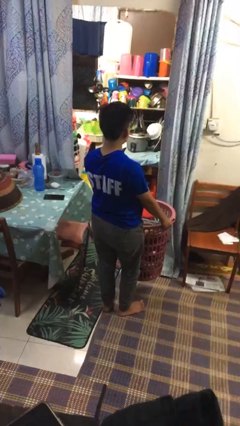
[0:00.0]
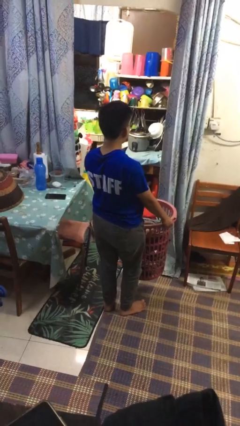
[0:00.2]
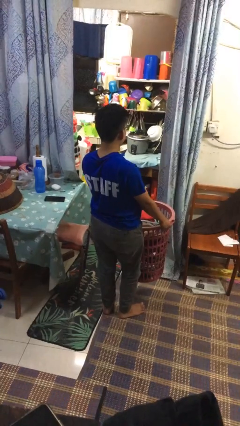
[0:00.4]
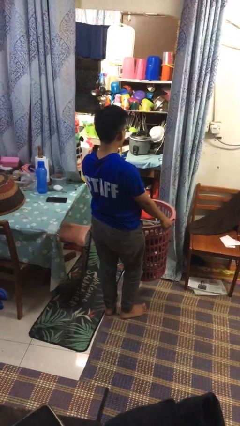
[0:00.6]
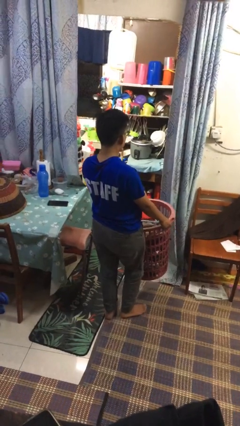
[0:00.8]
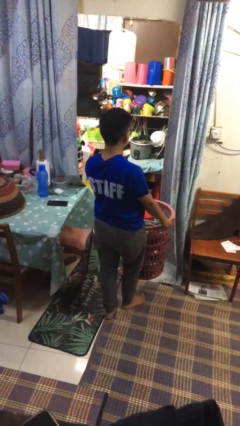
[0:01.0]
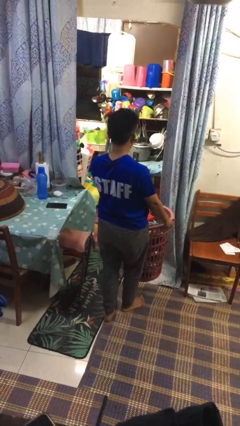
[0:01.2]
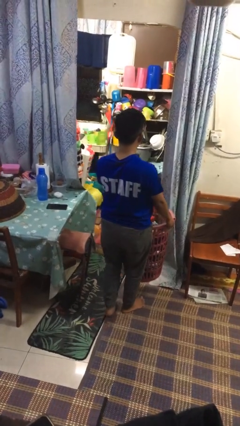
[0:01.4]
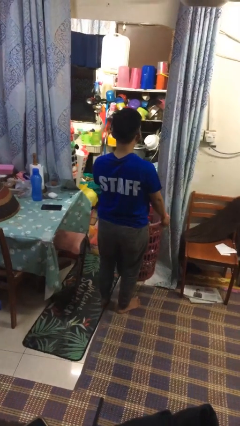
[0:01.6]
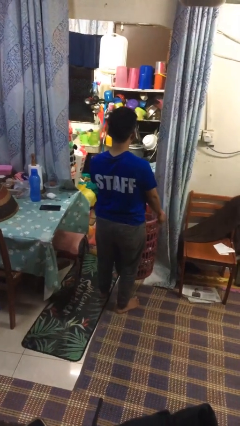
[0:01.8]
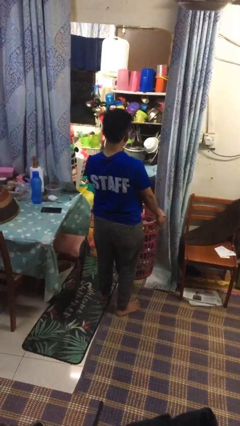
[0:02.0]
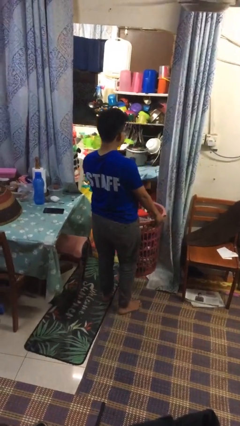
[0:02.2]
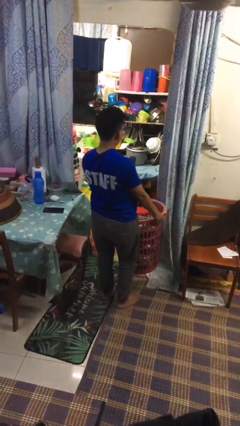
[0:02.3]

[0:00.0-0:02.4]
person carries laundry basket

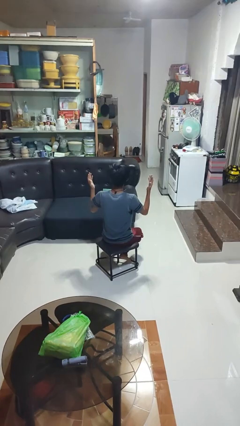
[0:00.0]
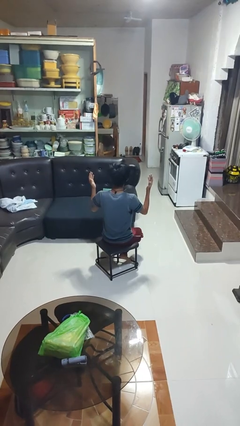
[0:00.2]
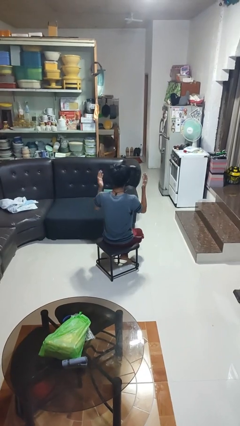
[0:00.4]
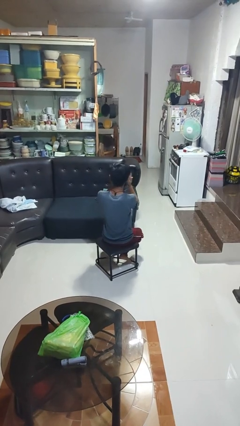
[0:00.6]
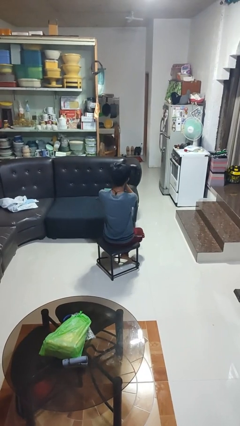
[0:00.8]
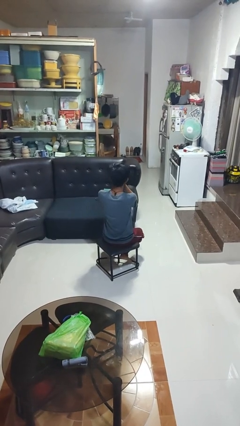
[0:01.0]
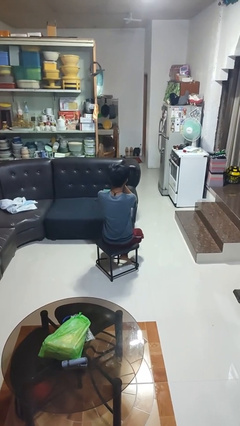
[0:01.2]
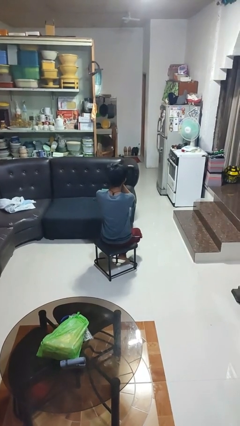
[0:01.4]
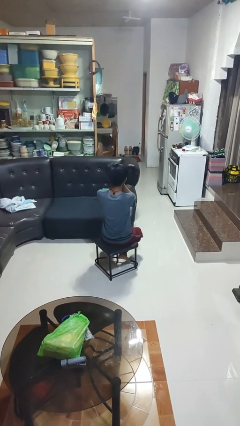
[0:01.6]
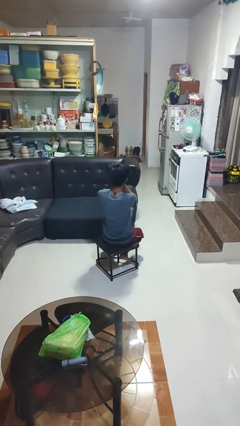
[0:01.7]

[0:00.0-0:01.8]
person covers face with hands

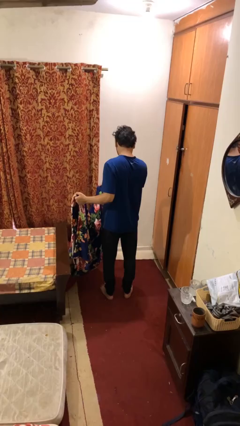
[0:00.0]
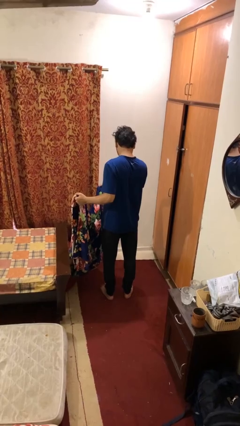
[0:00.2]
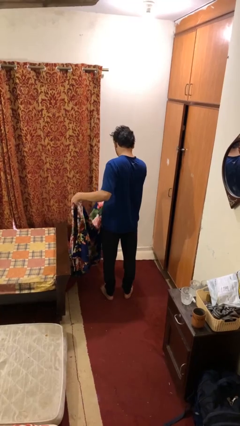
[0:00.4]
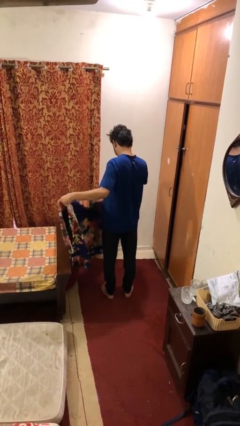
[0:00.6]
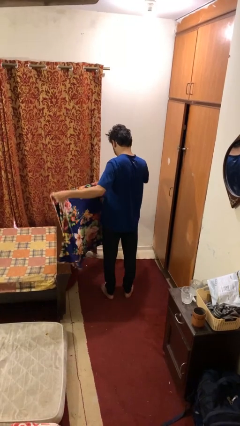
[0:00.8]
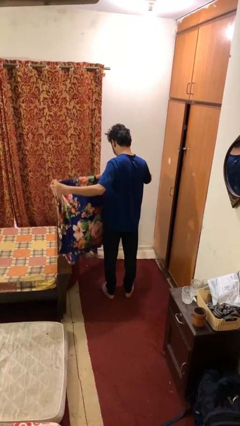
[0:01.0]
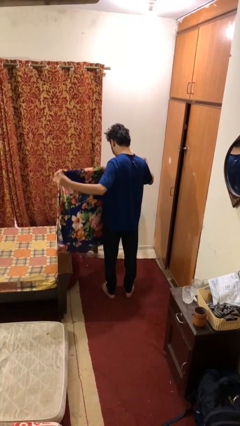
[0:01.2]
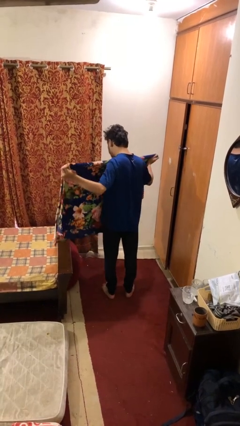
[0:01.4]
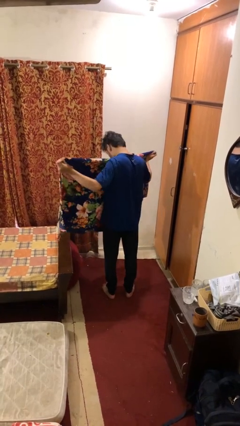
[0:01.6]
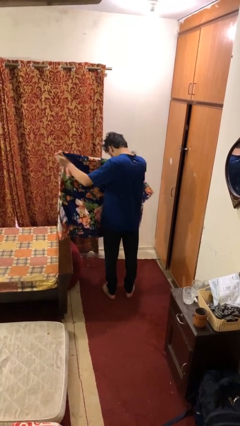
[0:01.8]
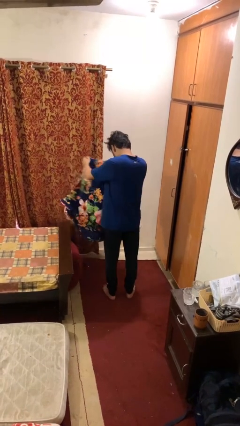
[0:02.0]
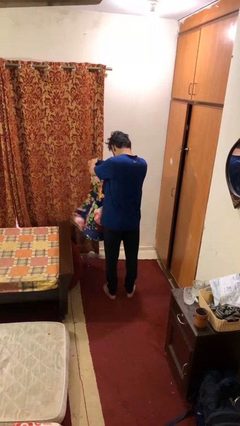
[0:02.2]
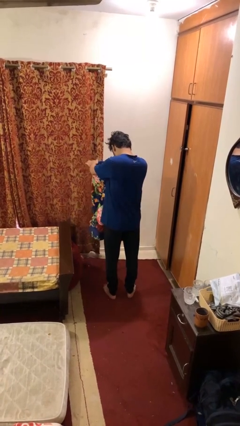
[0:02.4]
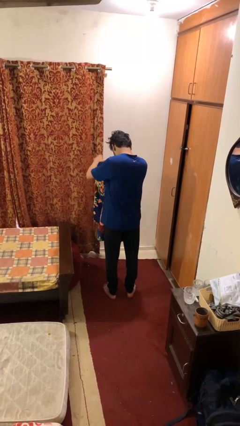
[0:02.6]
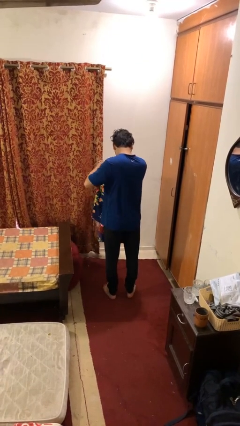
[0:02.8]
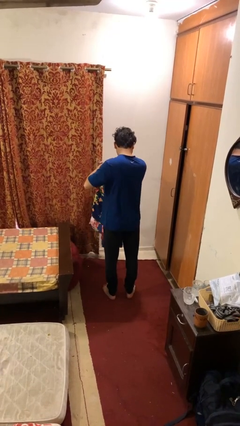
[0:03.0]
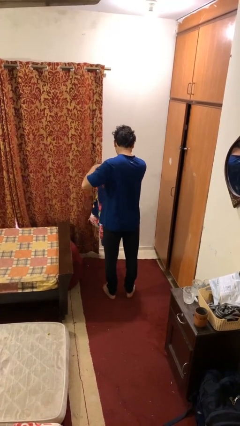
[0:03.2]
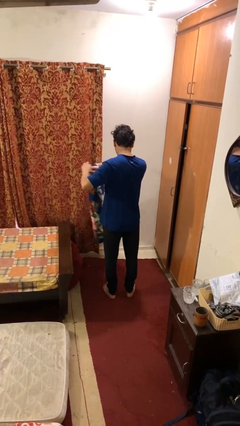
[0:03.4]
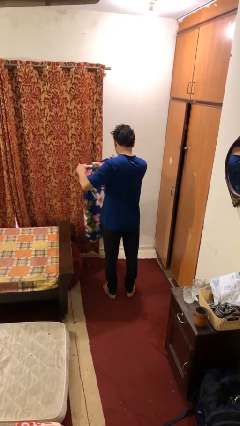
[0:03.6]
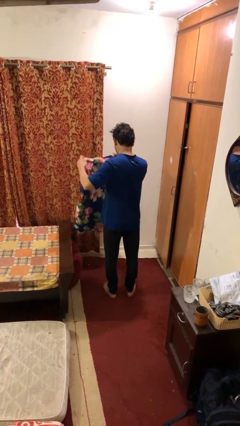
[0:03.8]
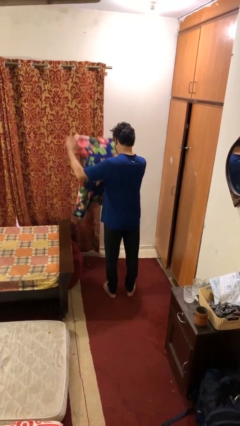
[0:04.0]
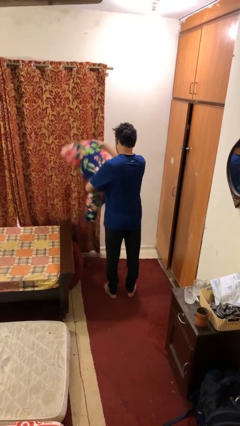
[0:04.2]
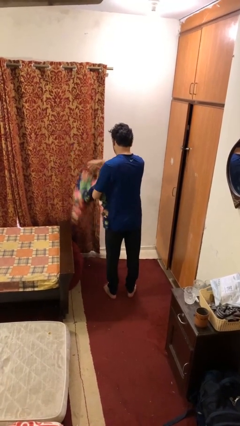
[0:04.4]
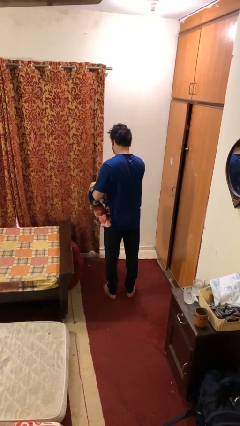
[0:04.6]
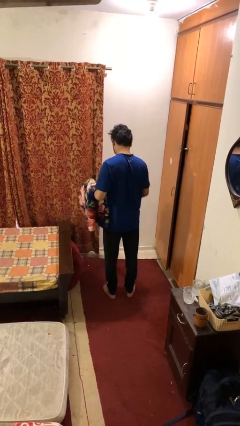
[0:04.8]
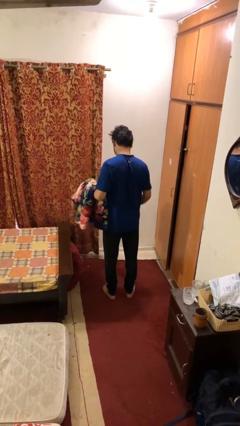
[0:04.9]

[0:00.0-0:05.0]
person folds blanket

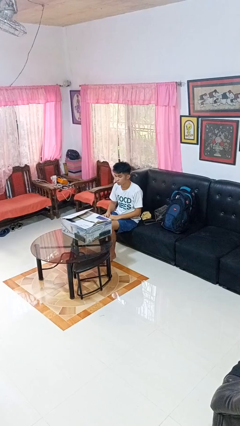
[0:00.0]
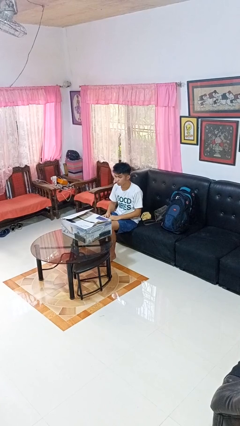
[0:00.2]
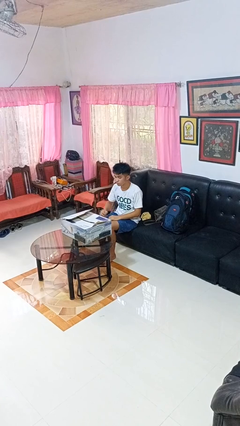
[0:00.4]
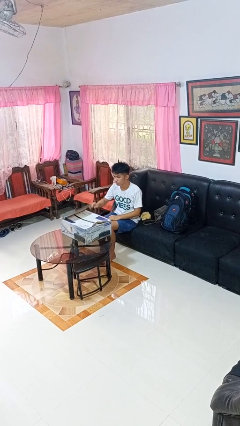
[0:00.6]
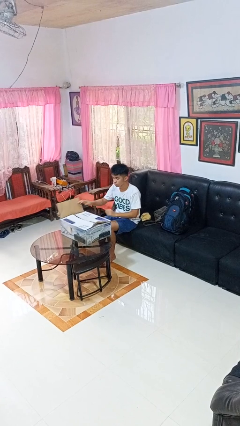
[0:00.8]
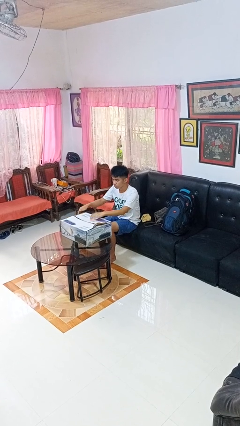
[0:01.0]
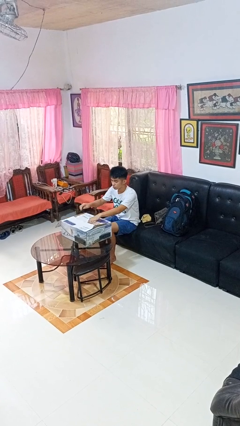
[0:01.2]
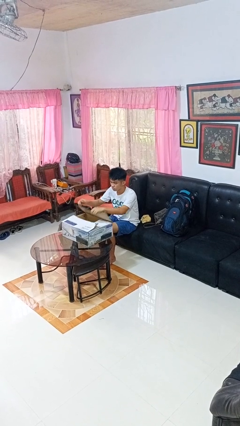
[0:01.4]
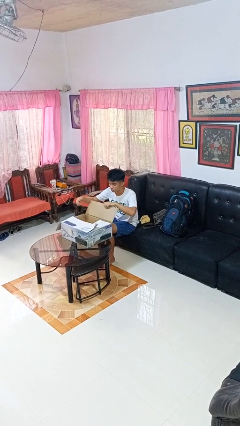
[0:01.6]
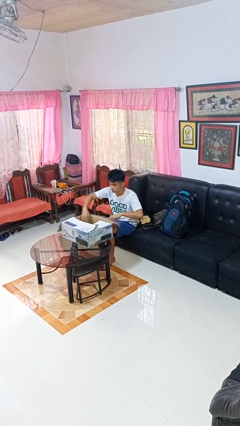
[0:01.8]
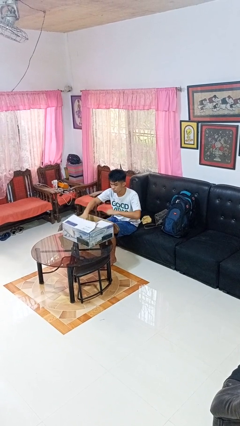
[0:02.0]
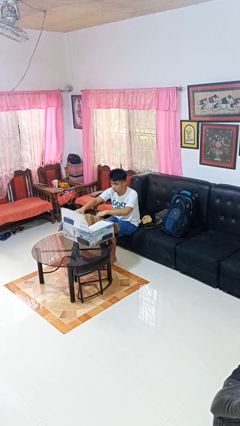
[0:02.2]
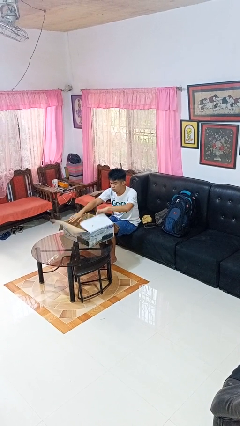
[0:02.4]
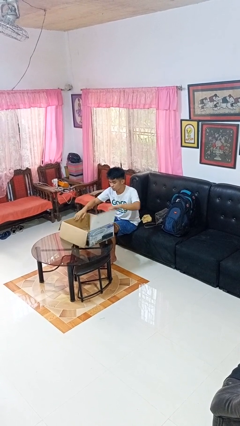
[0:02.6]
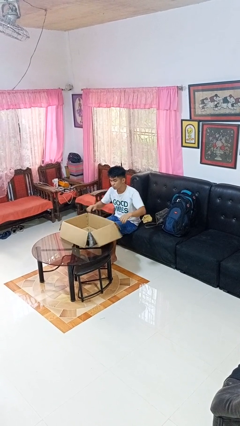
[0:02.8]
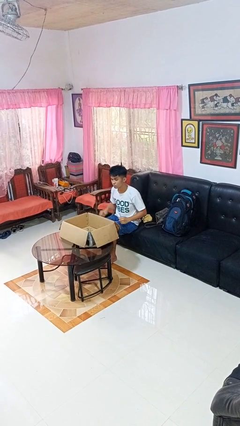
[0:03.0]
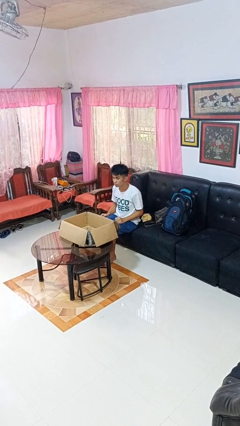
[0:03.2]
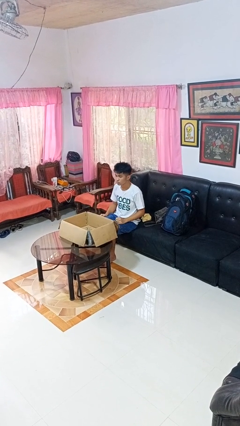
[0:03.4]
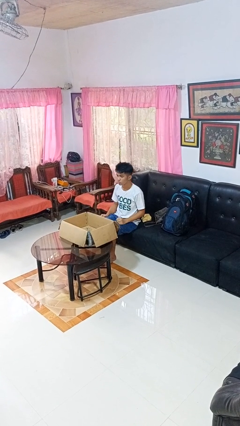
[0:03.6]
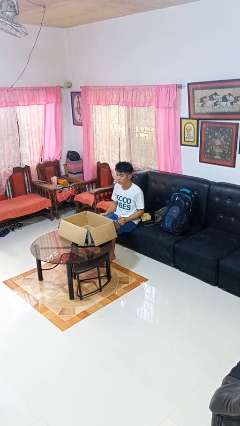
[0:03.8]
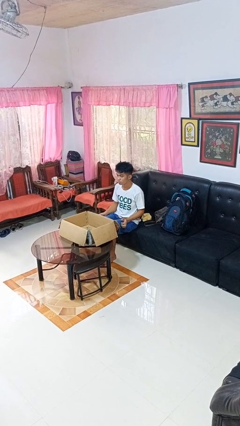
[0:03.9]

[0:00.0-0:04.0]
person opens box

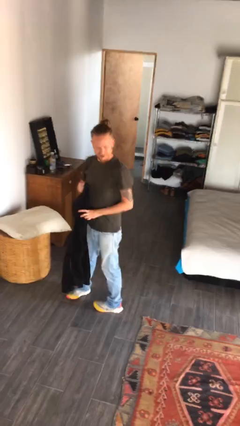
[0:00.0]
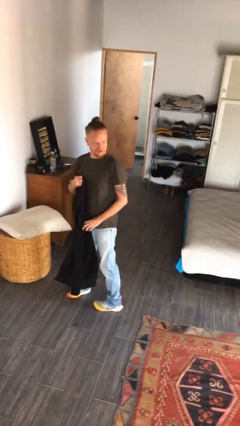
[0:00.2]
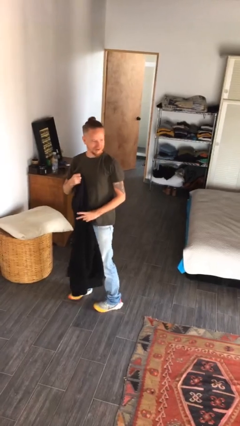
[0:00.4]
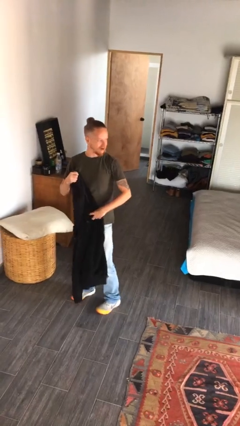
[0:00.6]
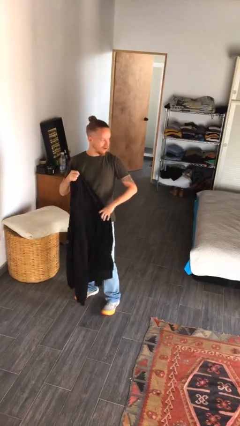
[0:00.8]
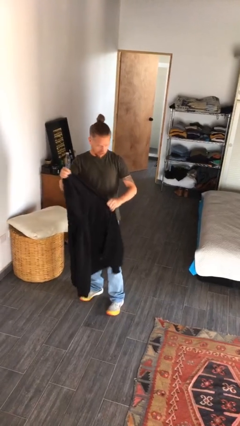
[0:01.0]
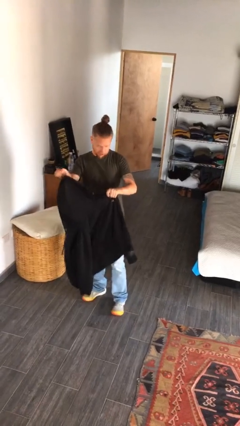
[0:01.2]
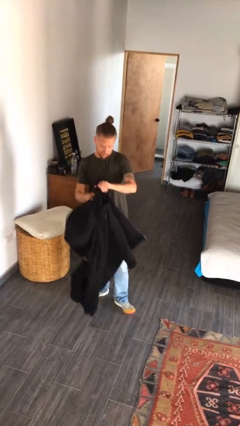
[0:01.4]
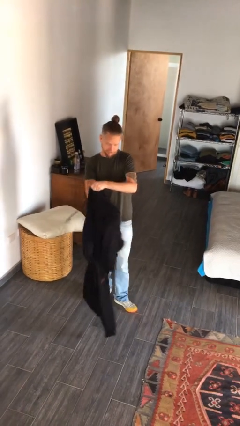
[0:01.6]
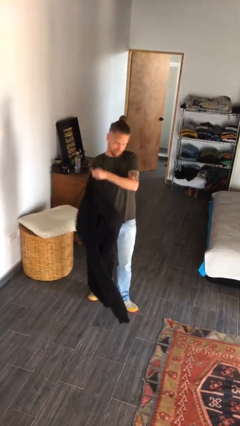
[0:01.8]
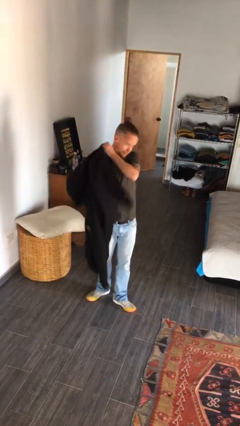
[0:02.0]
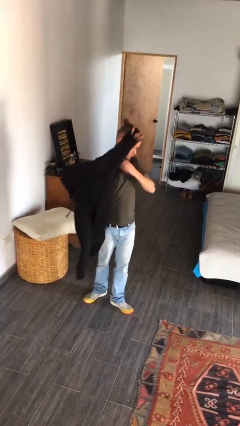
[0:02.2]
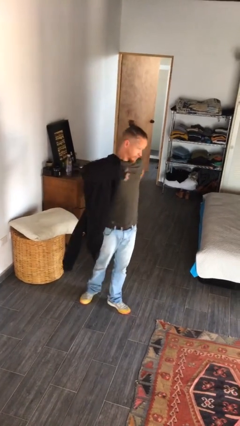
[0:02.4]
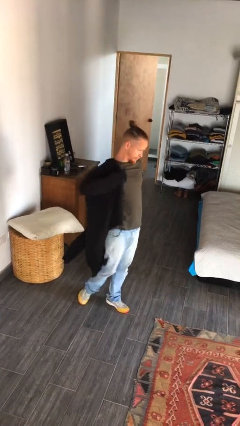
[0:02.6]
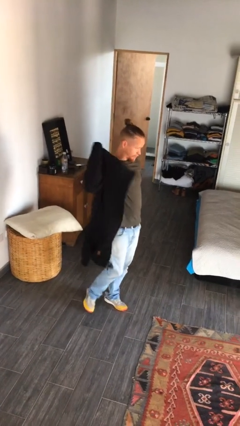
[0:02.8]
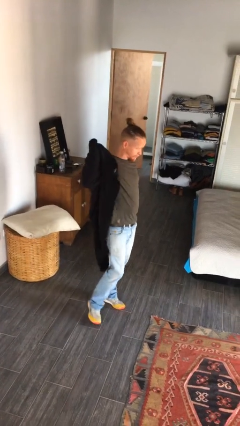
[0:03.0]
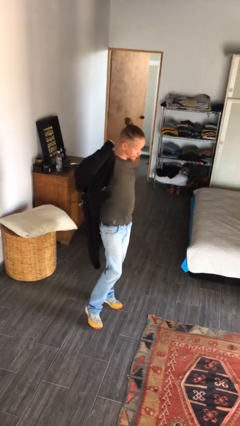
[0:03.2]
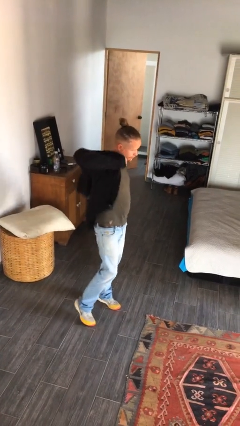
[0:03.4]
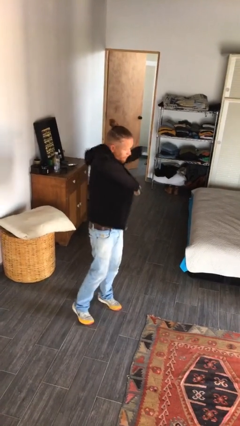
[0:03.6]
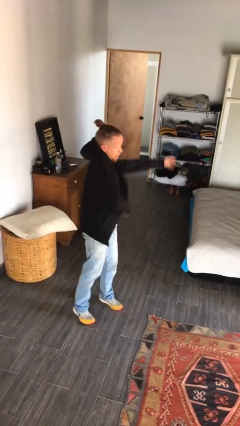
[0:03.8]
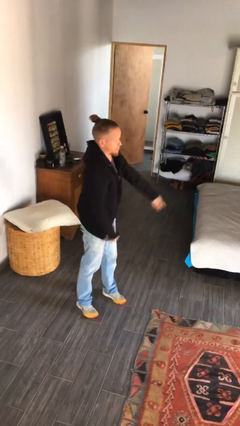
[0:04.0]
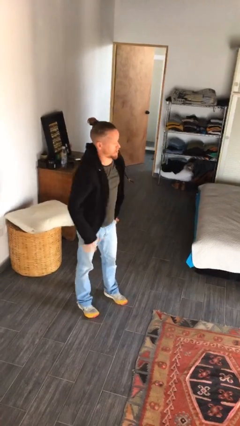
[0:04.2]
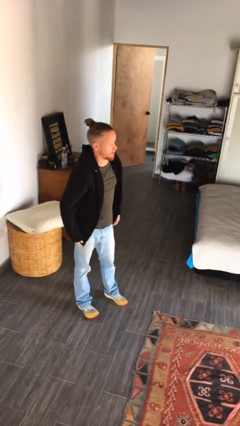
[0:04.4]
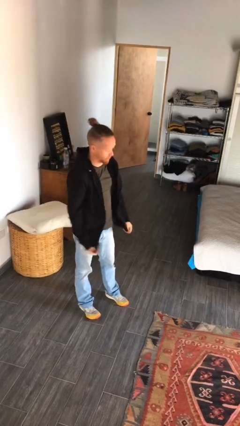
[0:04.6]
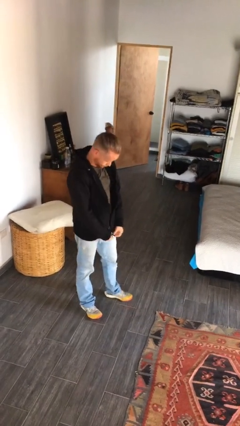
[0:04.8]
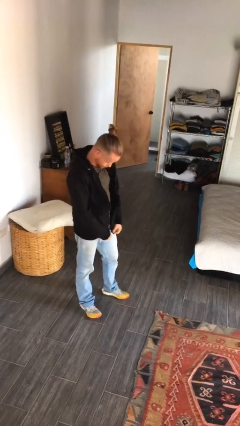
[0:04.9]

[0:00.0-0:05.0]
person puts on jacket
